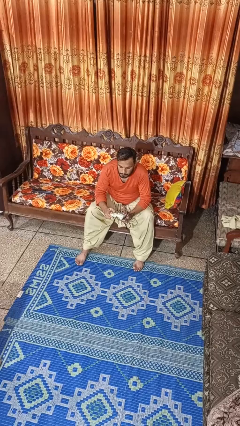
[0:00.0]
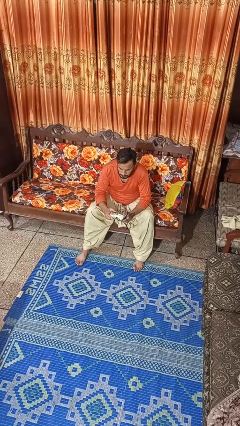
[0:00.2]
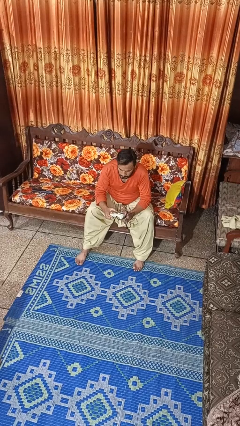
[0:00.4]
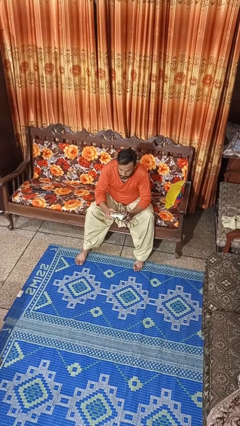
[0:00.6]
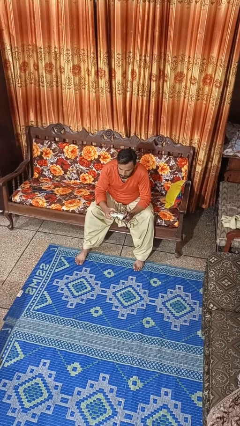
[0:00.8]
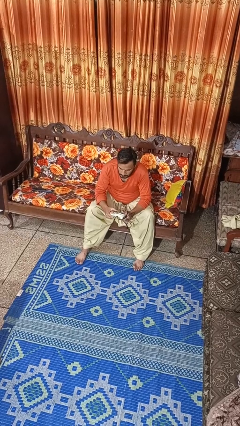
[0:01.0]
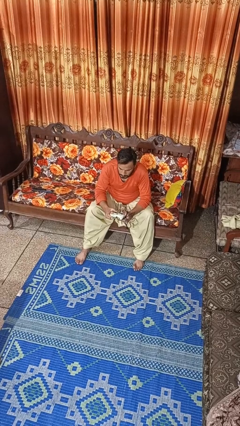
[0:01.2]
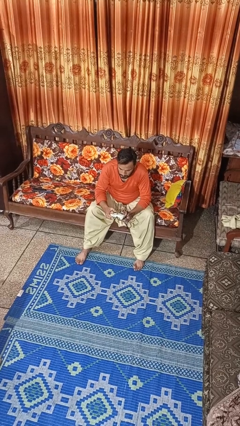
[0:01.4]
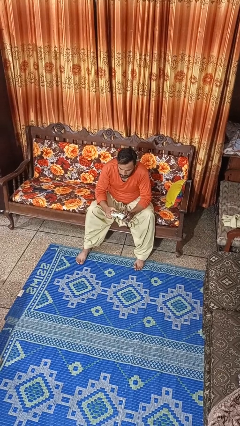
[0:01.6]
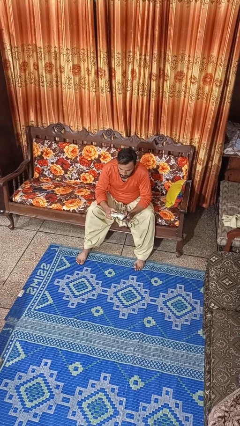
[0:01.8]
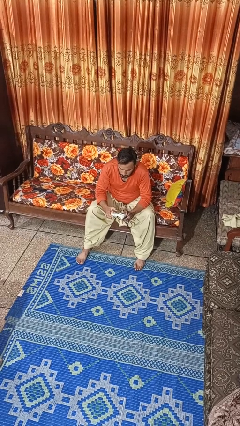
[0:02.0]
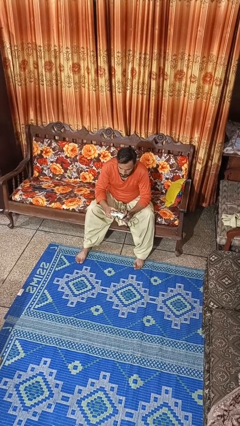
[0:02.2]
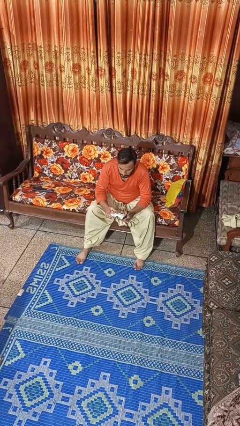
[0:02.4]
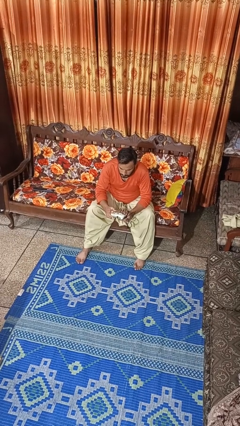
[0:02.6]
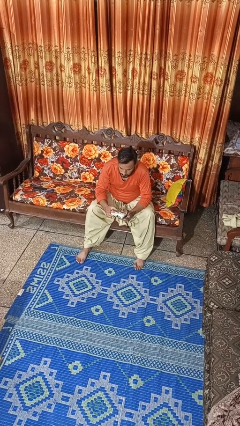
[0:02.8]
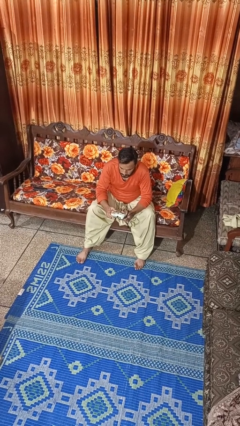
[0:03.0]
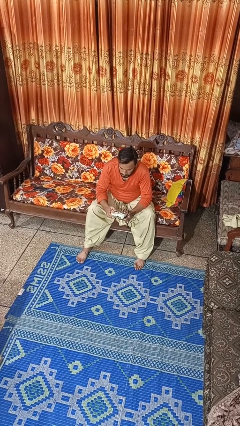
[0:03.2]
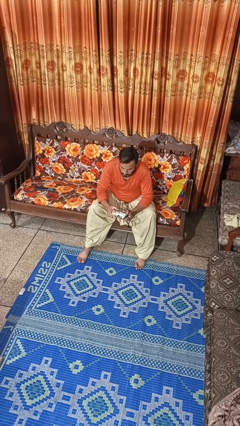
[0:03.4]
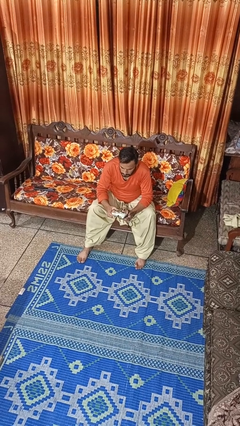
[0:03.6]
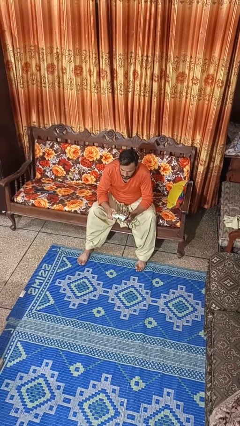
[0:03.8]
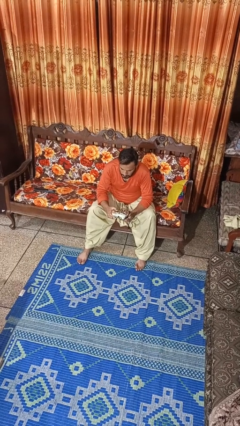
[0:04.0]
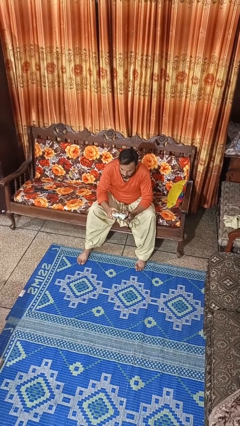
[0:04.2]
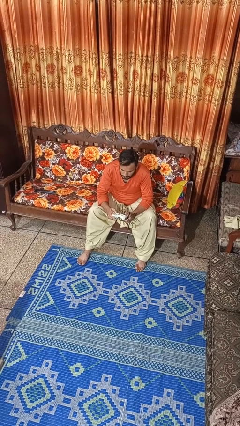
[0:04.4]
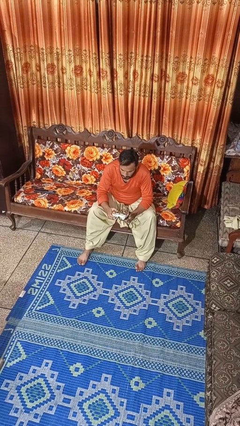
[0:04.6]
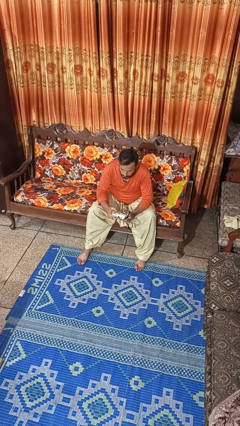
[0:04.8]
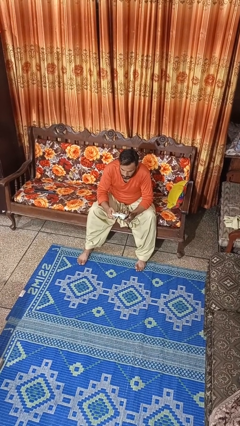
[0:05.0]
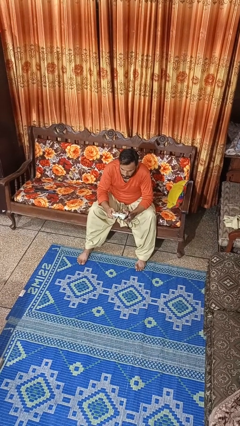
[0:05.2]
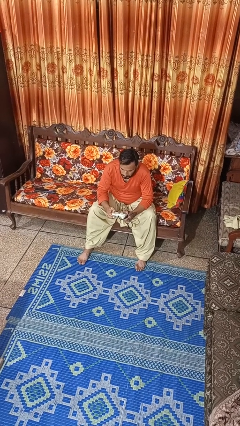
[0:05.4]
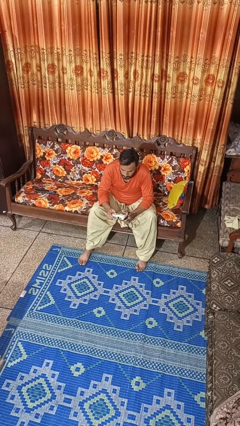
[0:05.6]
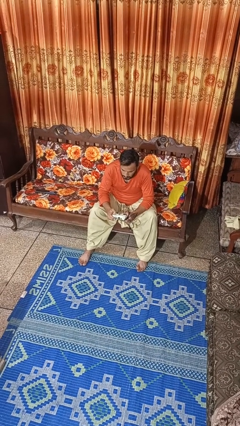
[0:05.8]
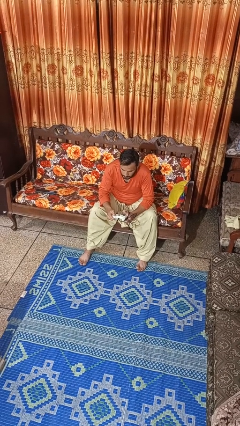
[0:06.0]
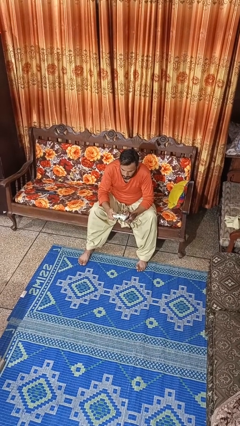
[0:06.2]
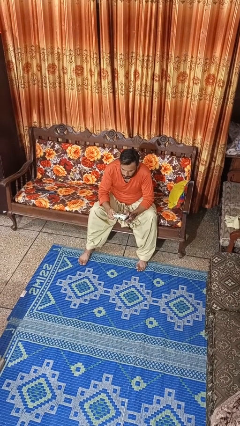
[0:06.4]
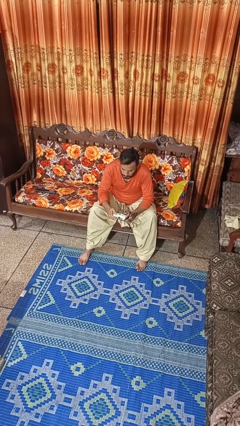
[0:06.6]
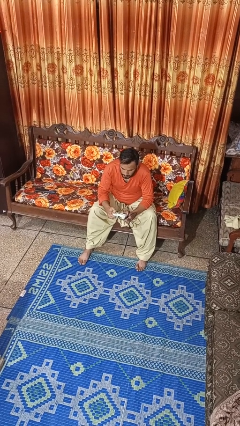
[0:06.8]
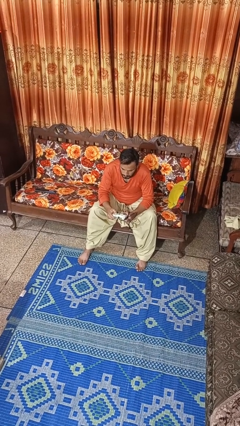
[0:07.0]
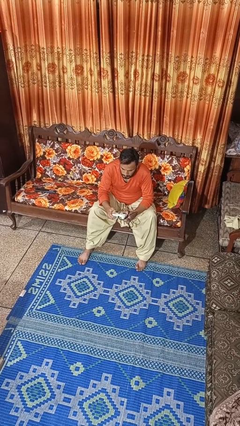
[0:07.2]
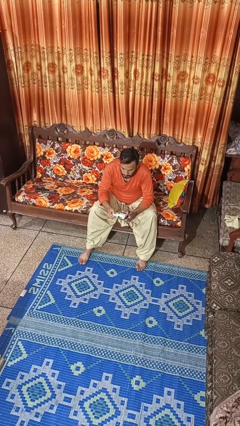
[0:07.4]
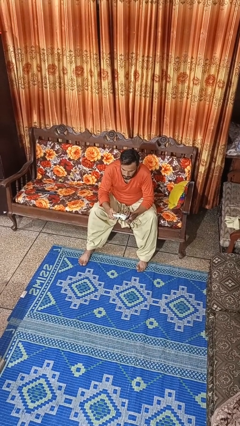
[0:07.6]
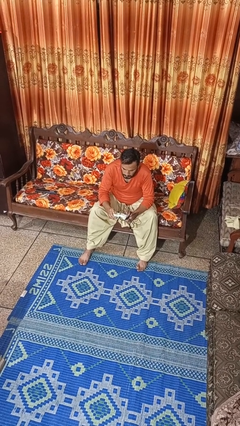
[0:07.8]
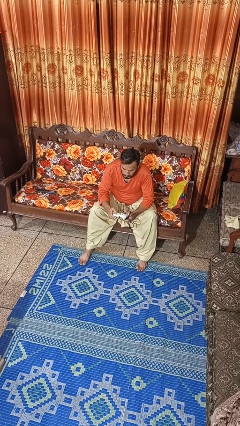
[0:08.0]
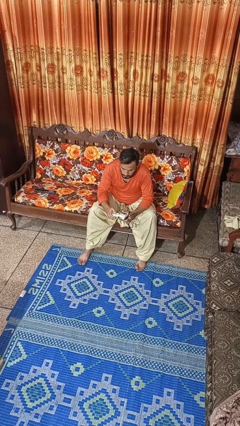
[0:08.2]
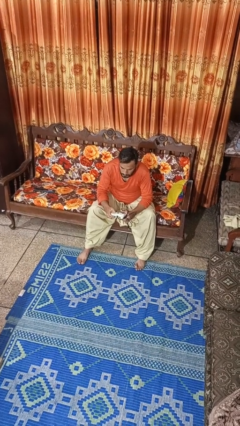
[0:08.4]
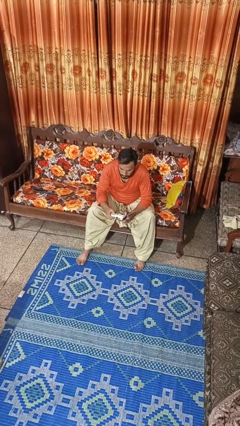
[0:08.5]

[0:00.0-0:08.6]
person interacts with handheld game

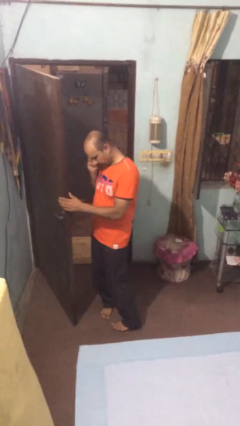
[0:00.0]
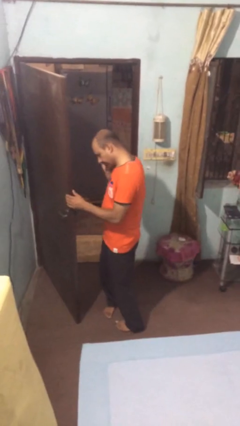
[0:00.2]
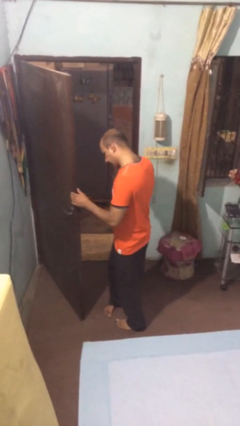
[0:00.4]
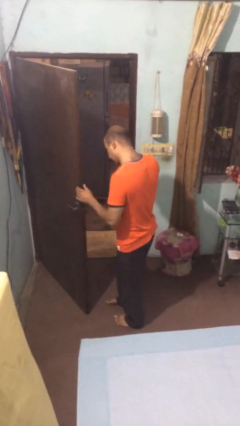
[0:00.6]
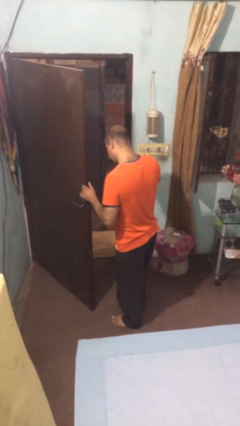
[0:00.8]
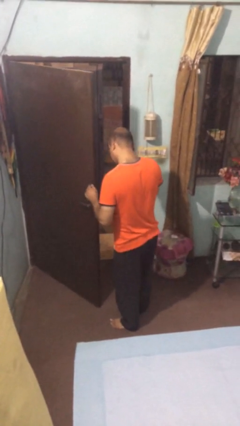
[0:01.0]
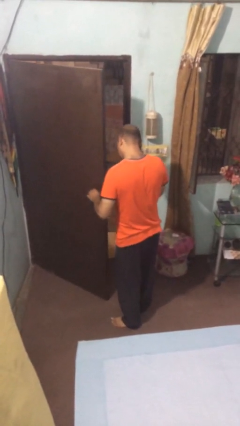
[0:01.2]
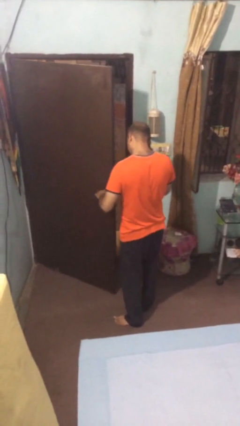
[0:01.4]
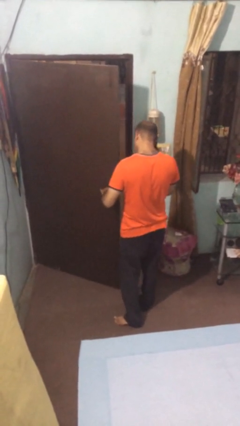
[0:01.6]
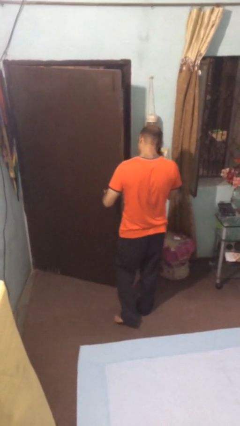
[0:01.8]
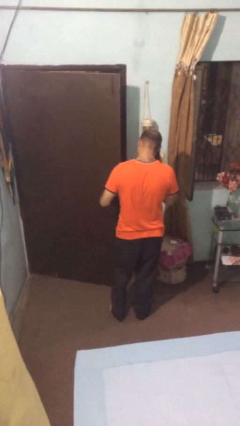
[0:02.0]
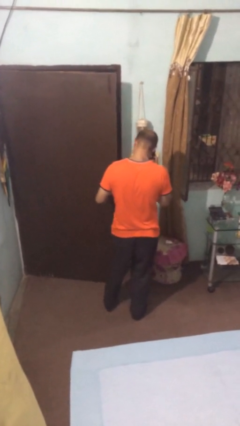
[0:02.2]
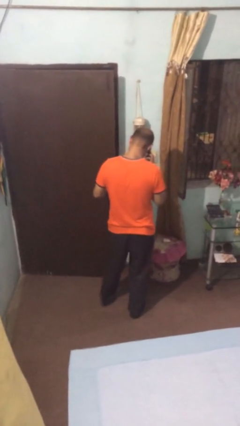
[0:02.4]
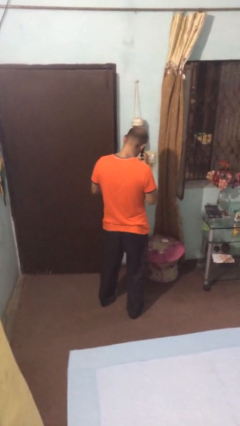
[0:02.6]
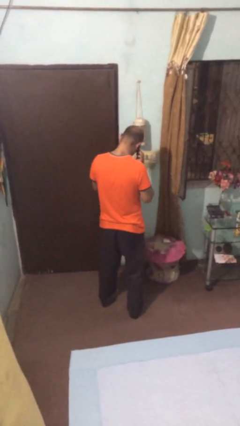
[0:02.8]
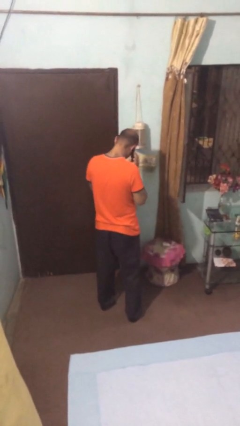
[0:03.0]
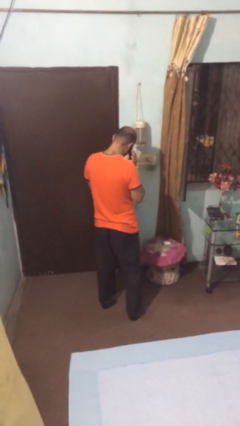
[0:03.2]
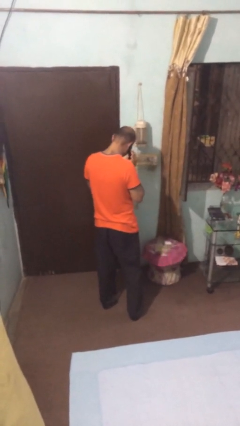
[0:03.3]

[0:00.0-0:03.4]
person closes facility door

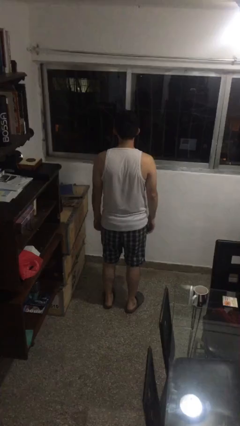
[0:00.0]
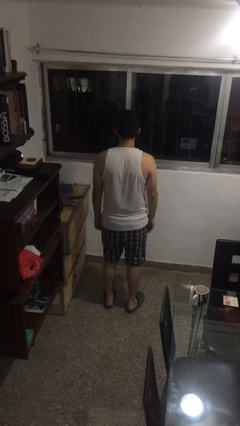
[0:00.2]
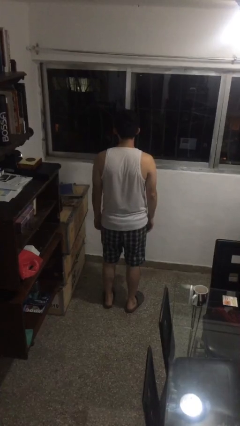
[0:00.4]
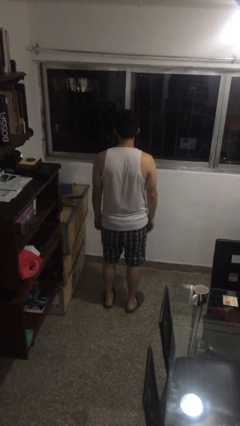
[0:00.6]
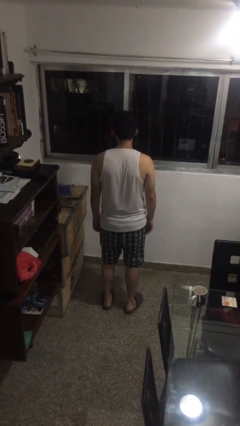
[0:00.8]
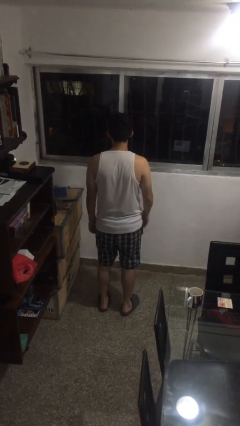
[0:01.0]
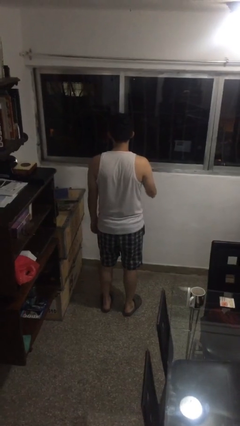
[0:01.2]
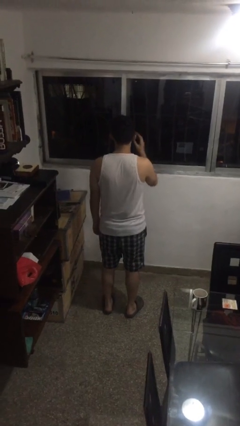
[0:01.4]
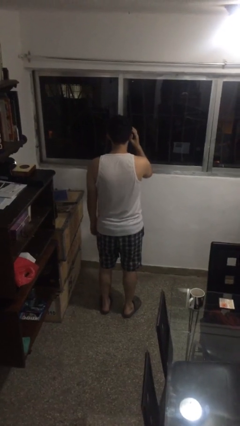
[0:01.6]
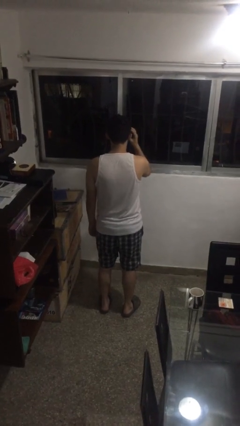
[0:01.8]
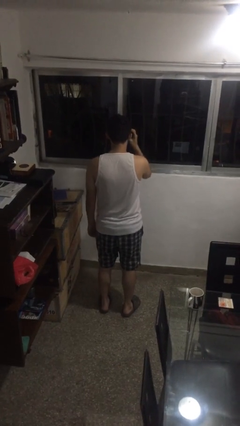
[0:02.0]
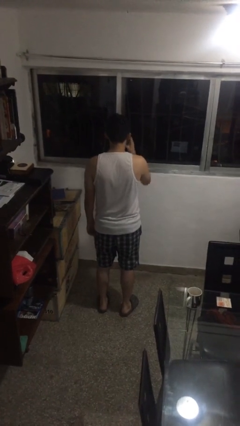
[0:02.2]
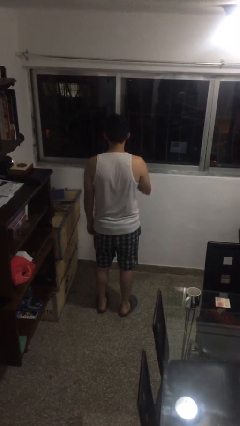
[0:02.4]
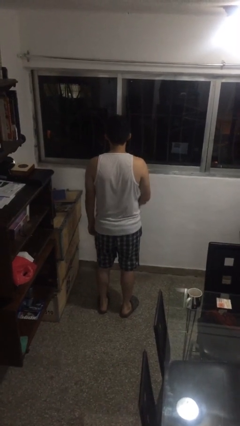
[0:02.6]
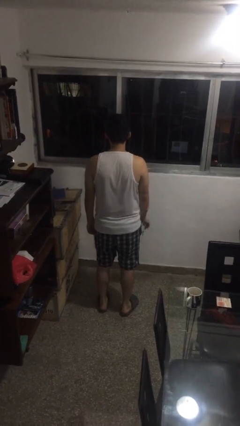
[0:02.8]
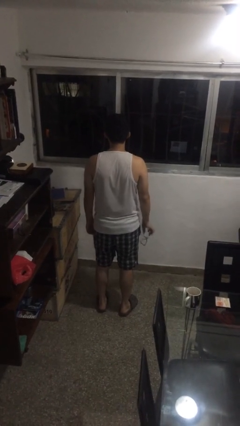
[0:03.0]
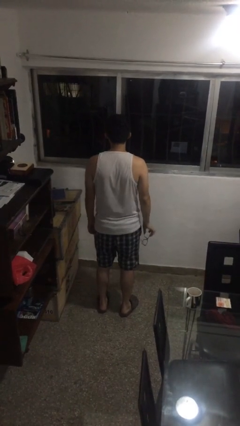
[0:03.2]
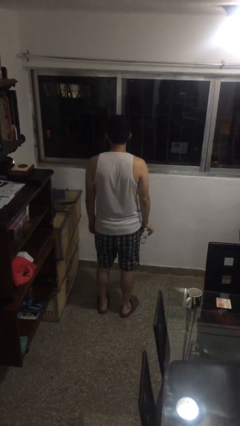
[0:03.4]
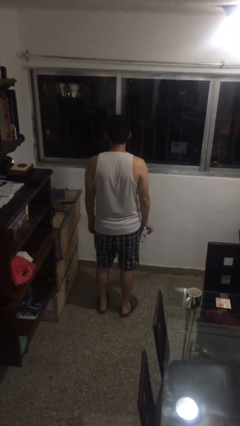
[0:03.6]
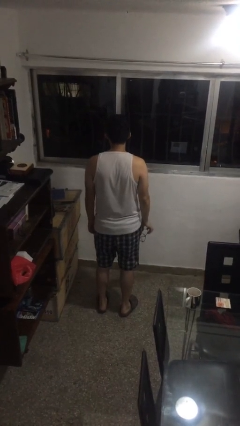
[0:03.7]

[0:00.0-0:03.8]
person takes off glasses

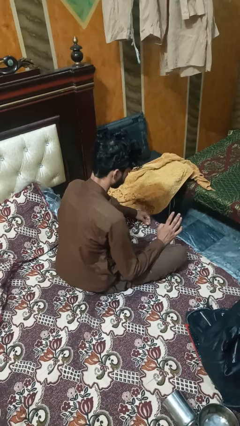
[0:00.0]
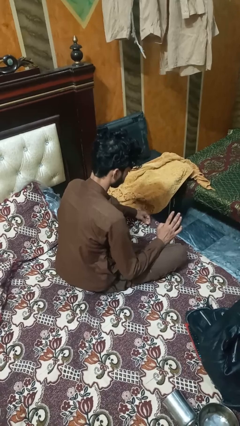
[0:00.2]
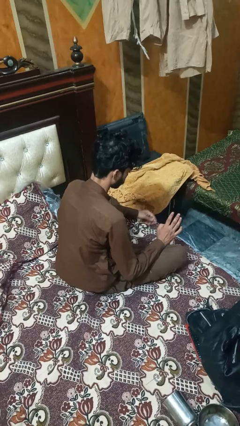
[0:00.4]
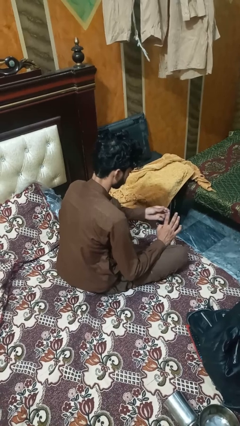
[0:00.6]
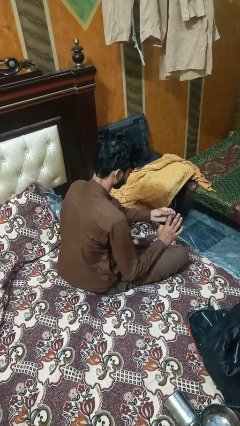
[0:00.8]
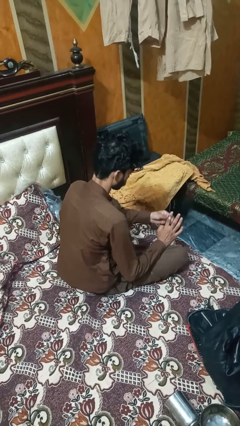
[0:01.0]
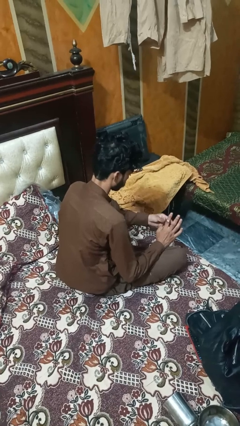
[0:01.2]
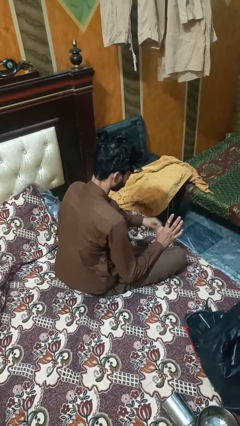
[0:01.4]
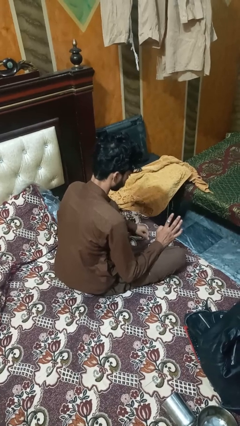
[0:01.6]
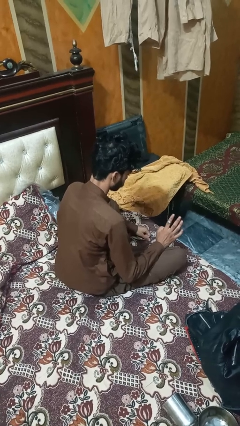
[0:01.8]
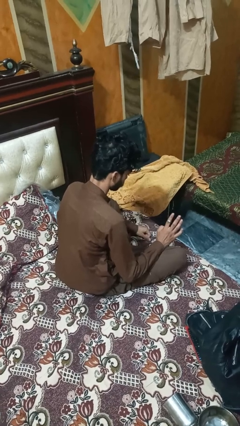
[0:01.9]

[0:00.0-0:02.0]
person puts on ring
